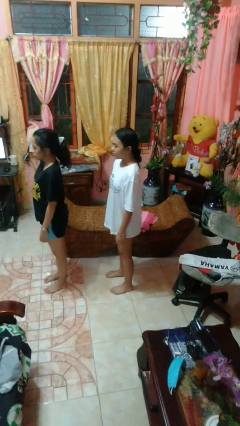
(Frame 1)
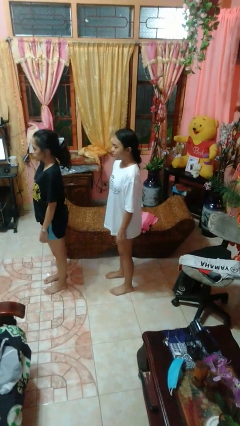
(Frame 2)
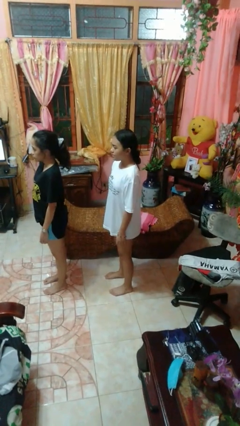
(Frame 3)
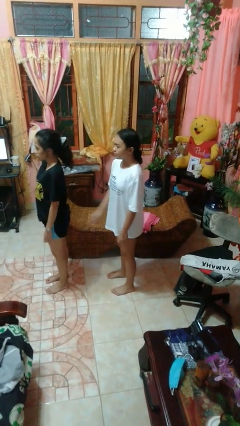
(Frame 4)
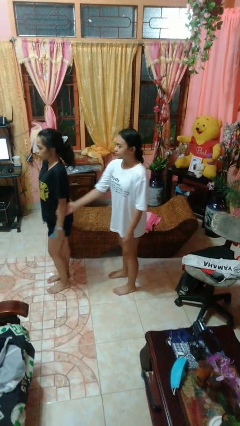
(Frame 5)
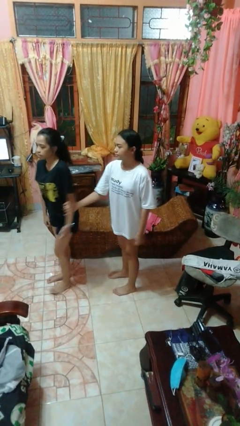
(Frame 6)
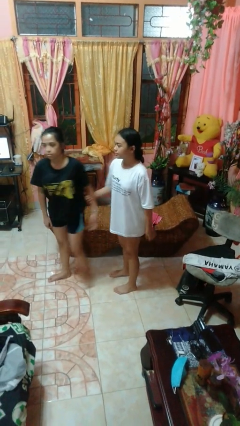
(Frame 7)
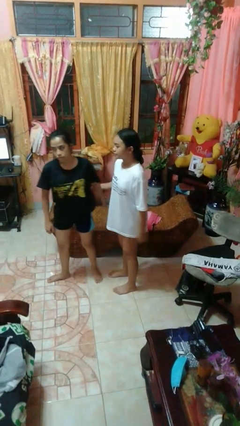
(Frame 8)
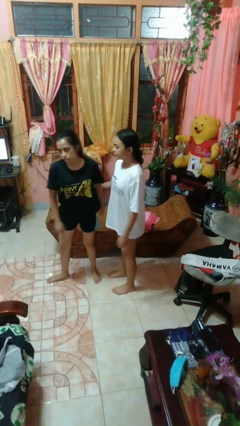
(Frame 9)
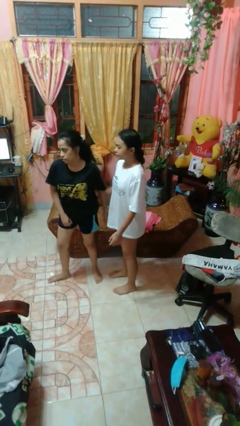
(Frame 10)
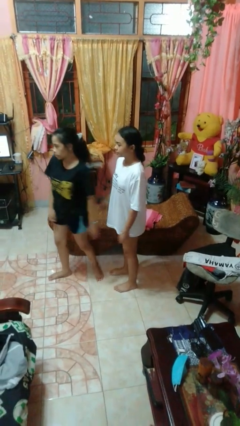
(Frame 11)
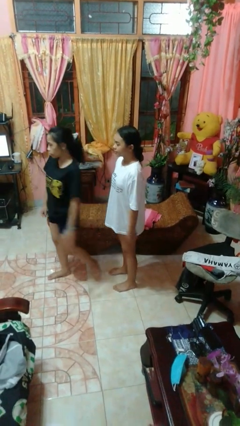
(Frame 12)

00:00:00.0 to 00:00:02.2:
person grabs person by forearm

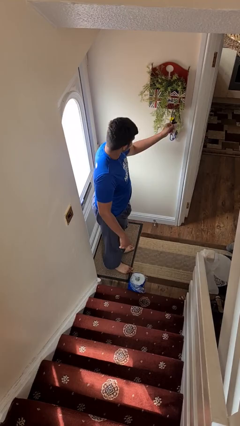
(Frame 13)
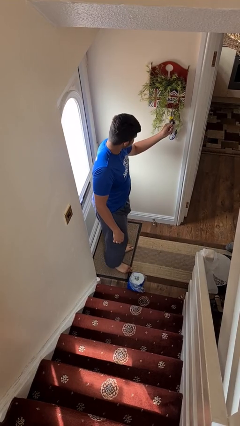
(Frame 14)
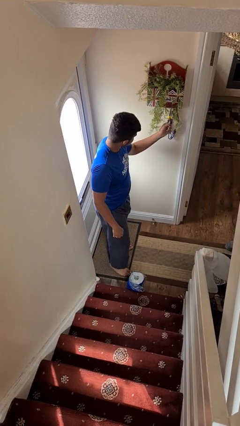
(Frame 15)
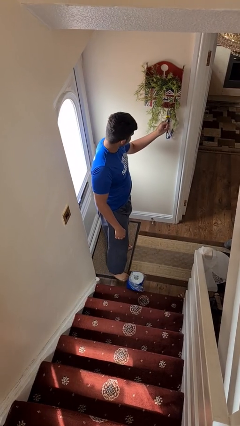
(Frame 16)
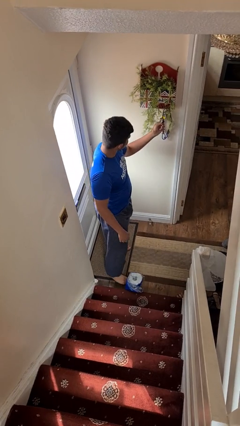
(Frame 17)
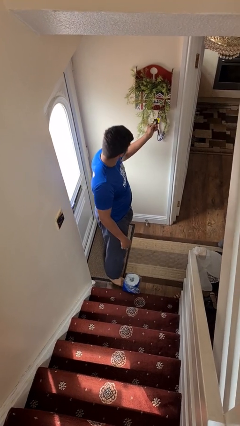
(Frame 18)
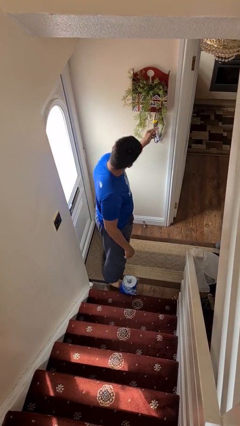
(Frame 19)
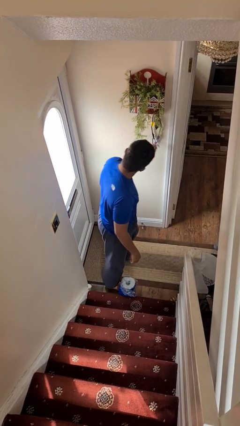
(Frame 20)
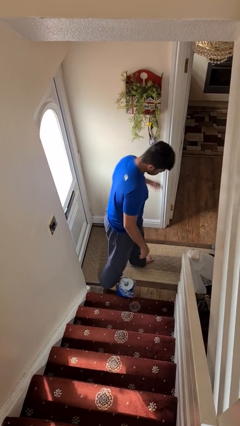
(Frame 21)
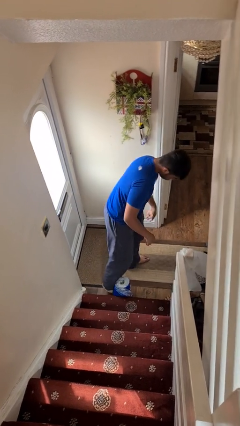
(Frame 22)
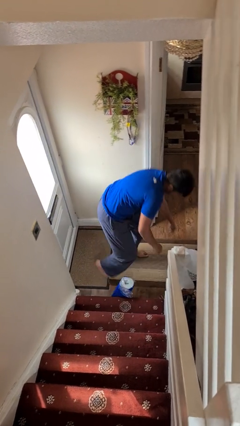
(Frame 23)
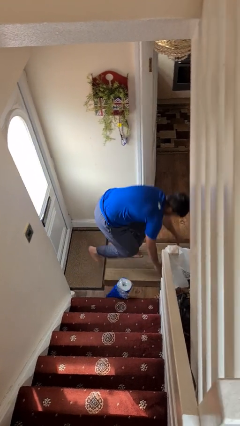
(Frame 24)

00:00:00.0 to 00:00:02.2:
person trips on object on floor

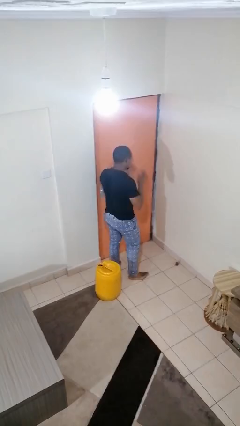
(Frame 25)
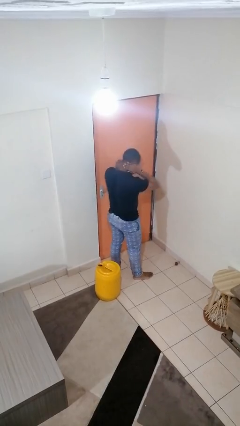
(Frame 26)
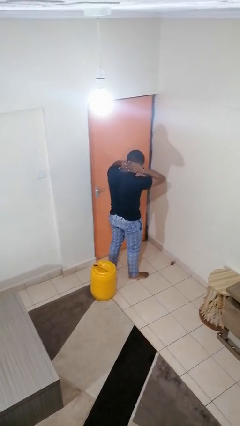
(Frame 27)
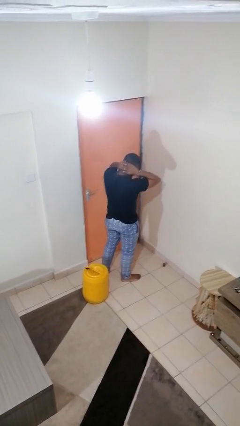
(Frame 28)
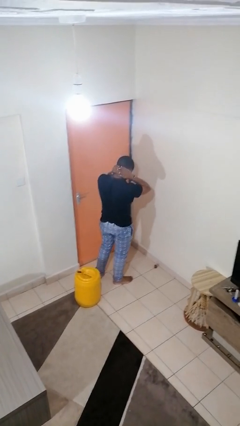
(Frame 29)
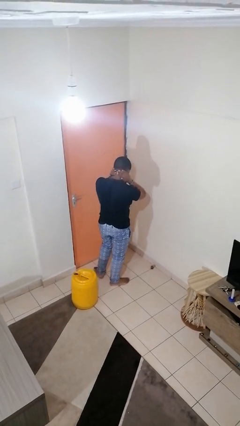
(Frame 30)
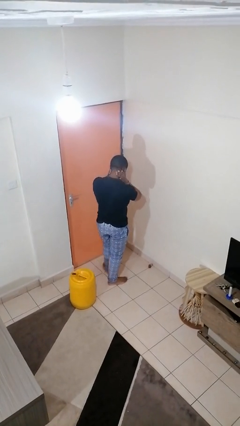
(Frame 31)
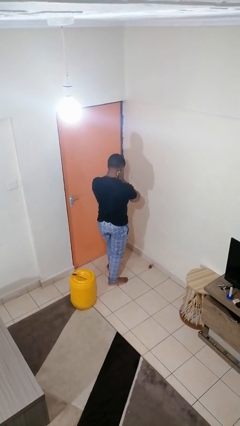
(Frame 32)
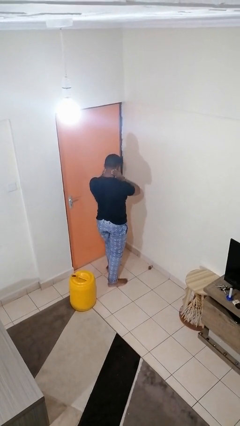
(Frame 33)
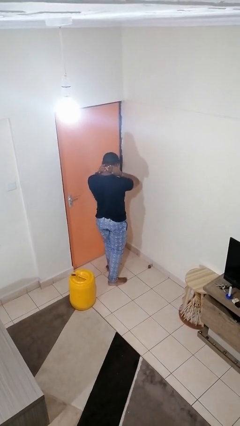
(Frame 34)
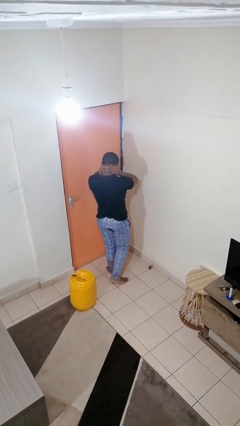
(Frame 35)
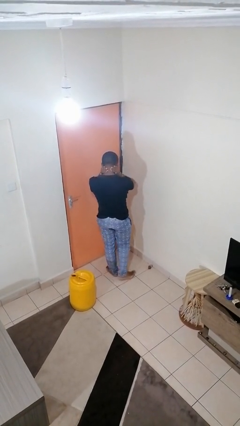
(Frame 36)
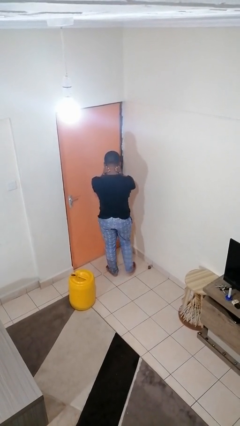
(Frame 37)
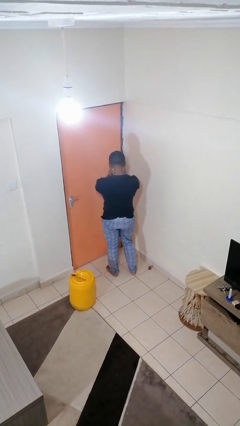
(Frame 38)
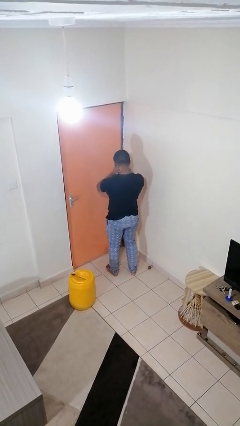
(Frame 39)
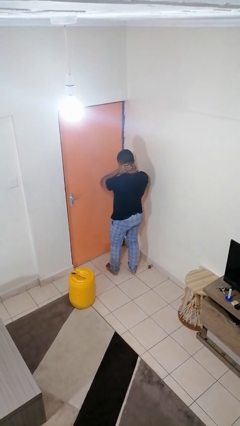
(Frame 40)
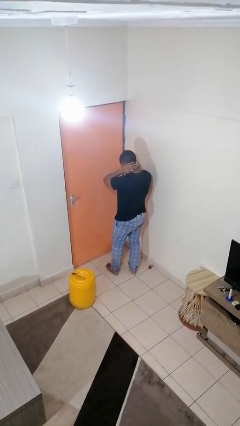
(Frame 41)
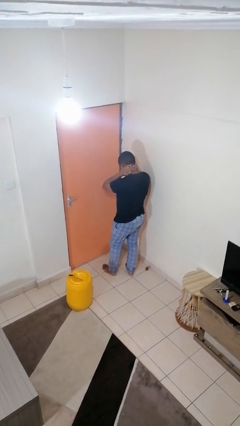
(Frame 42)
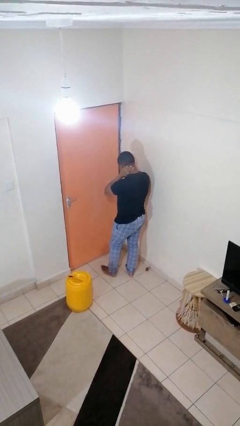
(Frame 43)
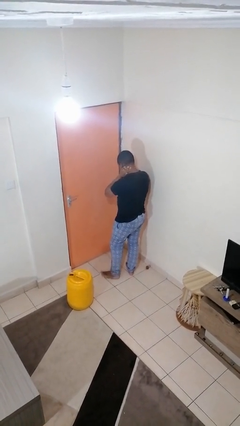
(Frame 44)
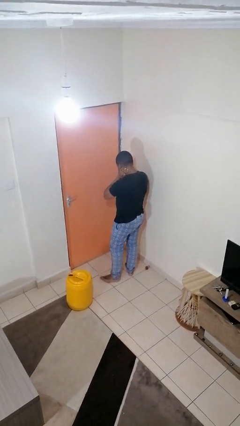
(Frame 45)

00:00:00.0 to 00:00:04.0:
person rubs neck

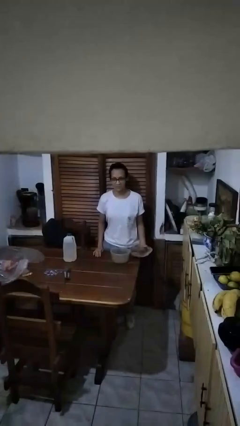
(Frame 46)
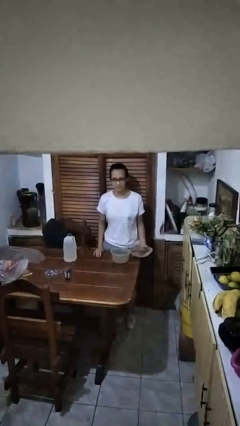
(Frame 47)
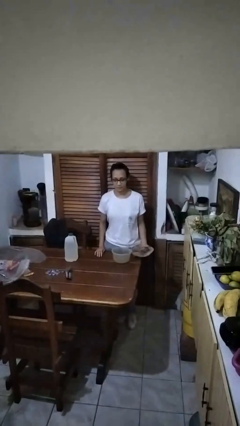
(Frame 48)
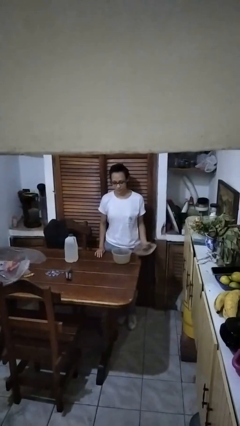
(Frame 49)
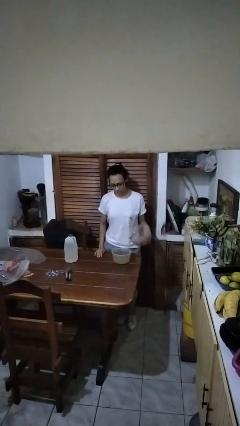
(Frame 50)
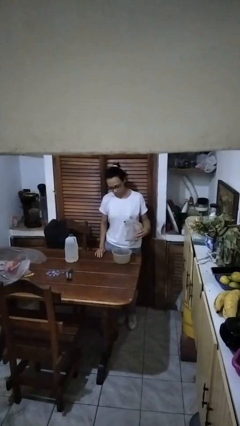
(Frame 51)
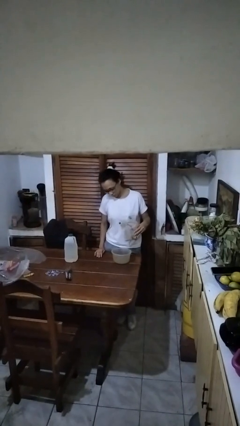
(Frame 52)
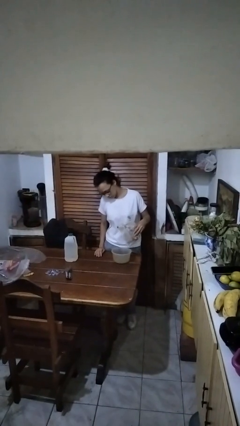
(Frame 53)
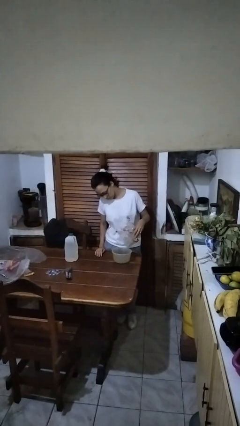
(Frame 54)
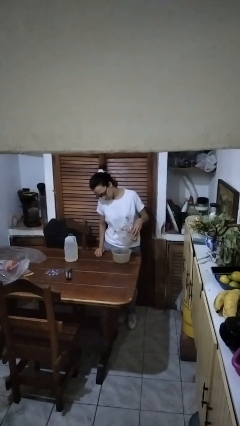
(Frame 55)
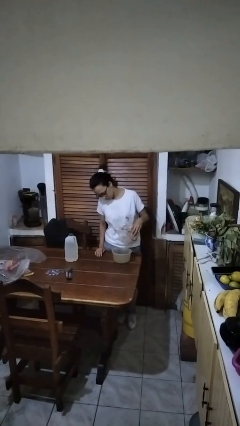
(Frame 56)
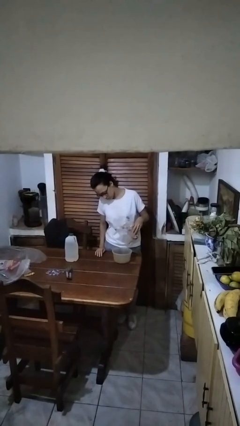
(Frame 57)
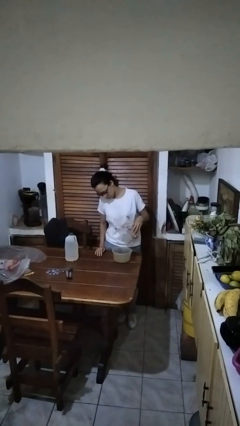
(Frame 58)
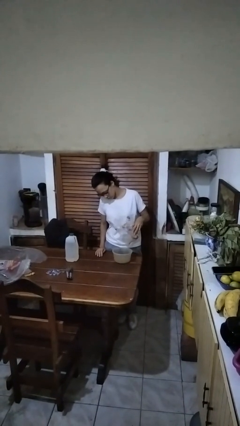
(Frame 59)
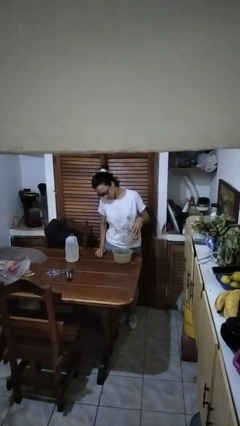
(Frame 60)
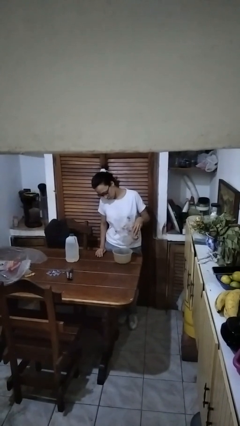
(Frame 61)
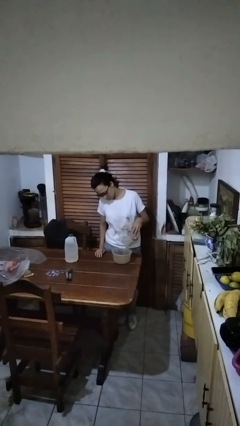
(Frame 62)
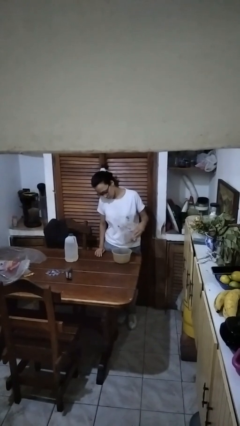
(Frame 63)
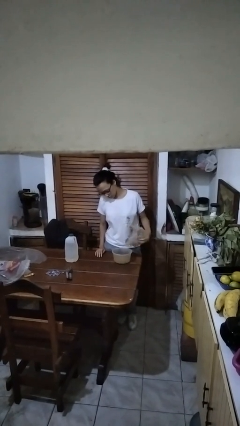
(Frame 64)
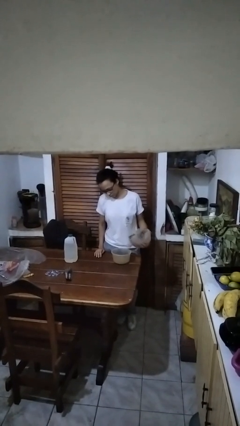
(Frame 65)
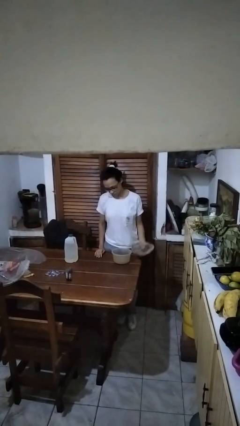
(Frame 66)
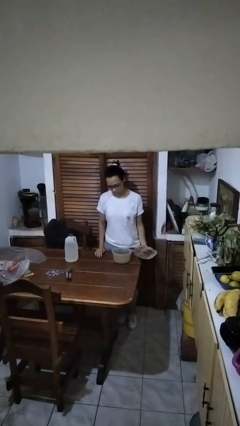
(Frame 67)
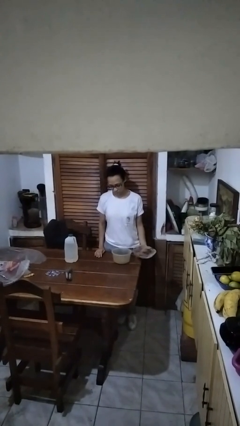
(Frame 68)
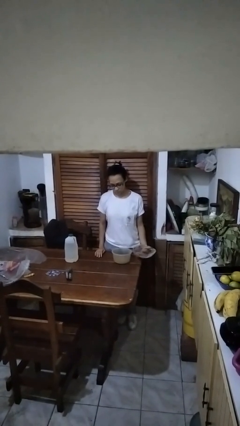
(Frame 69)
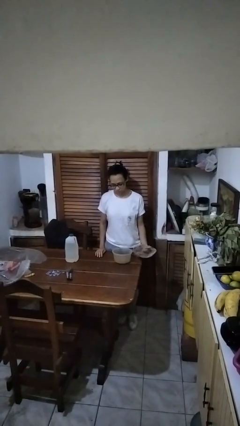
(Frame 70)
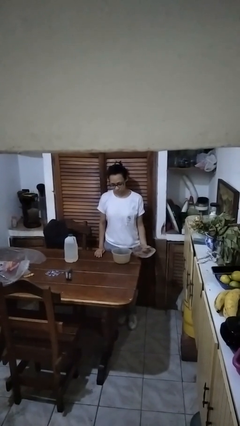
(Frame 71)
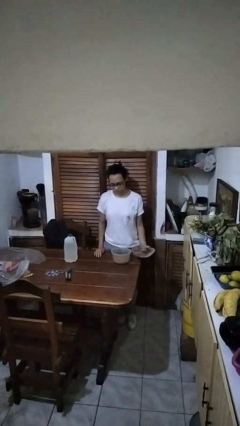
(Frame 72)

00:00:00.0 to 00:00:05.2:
person pours into bowl

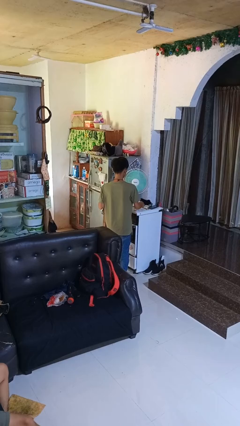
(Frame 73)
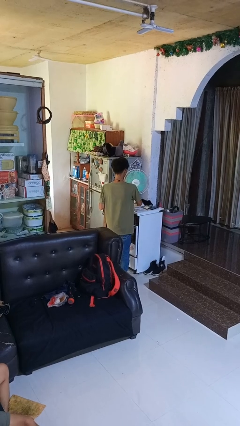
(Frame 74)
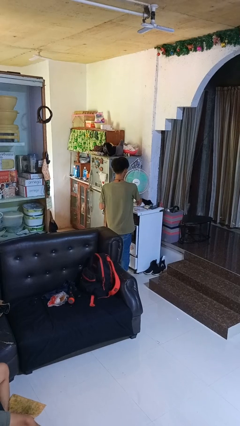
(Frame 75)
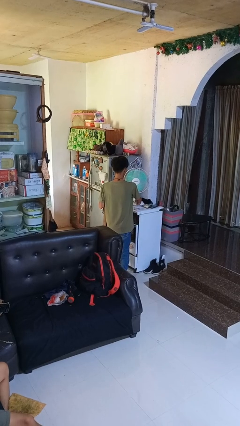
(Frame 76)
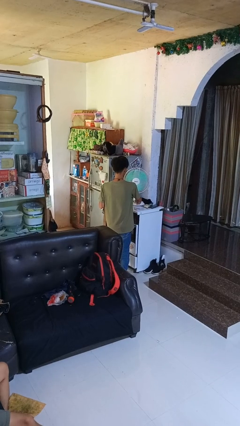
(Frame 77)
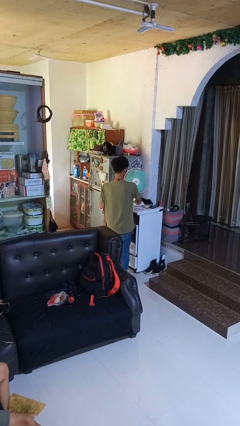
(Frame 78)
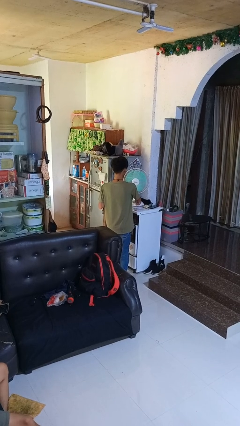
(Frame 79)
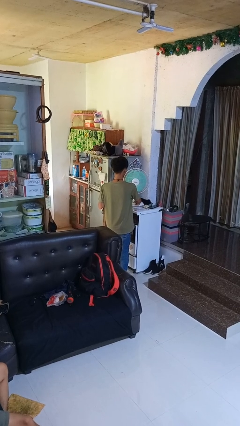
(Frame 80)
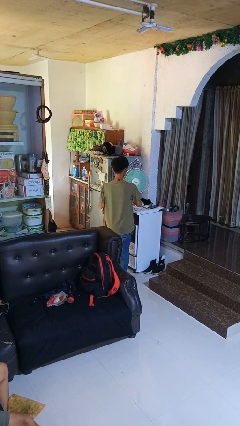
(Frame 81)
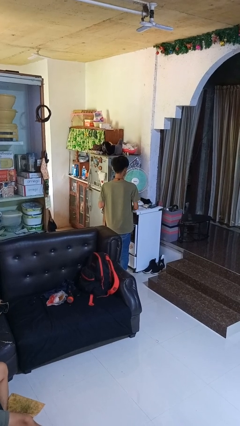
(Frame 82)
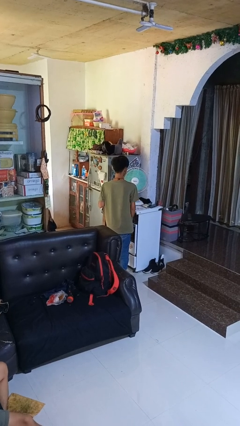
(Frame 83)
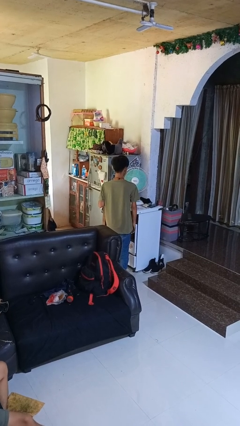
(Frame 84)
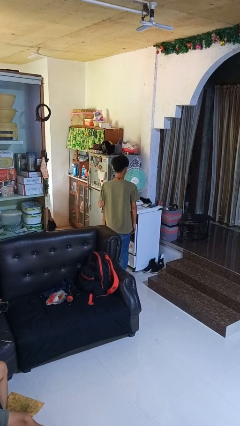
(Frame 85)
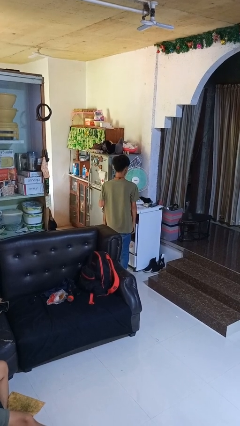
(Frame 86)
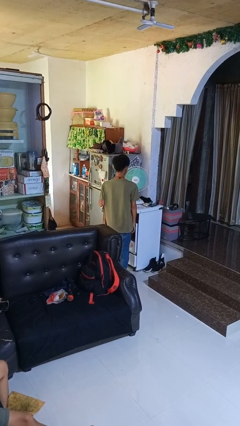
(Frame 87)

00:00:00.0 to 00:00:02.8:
person turns on fan

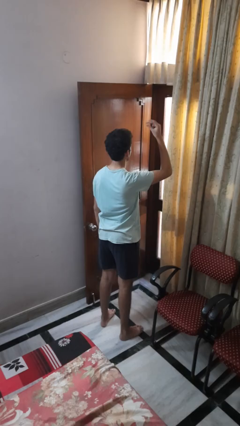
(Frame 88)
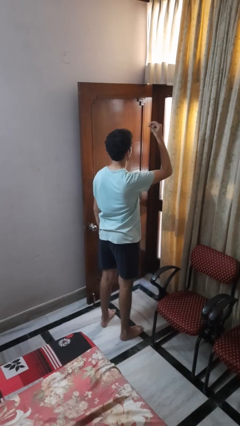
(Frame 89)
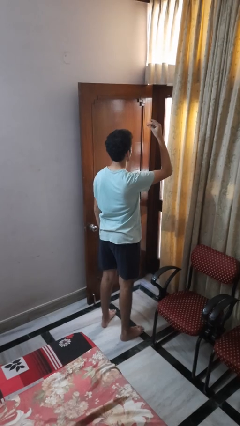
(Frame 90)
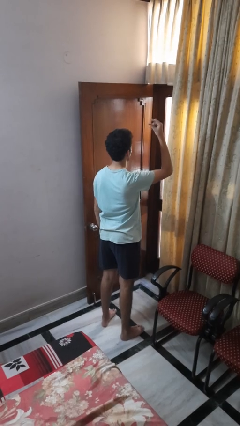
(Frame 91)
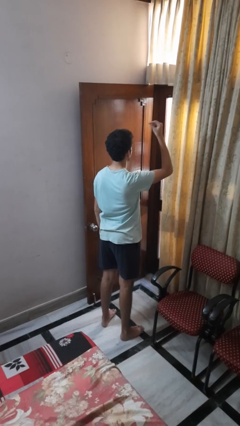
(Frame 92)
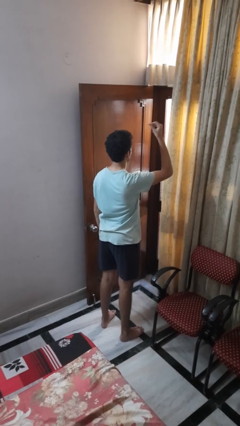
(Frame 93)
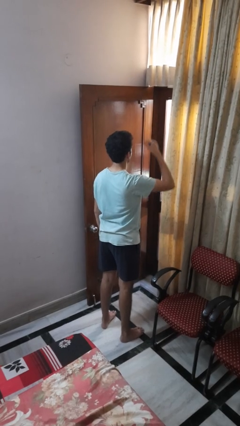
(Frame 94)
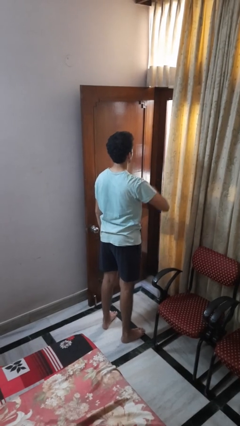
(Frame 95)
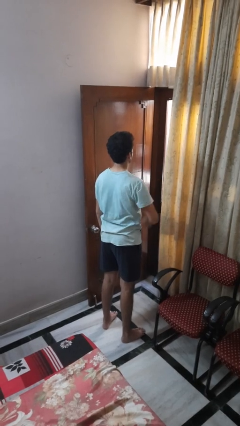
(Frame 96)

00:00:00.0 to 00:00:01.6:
person snaps fingers
